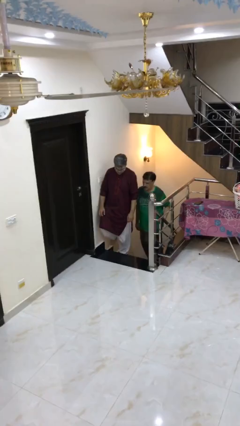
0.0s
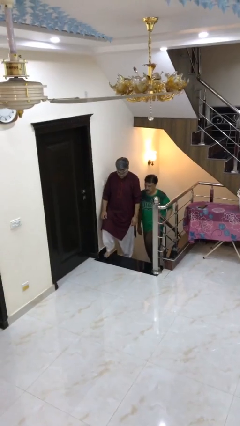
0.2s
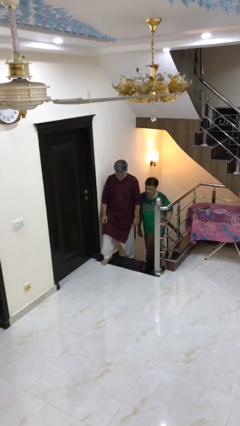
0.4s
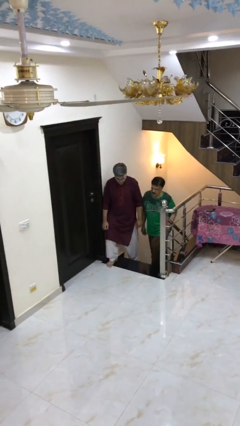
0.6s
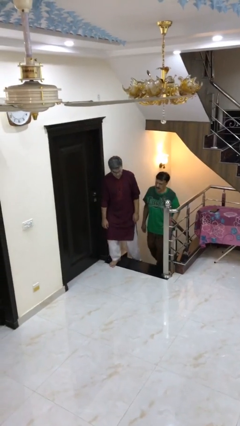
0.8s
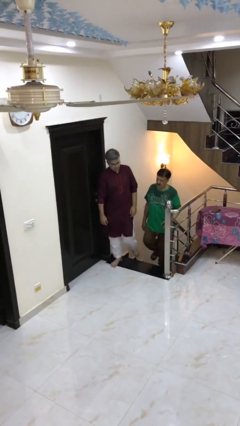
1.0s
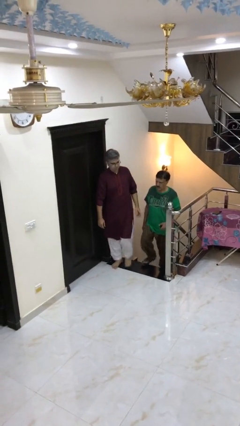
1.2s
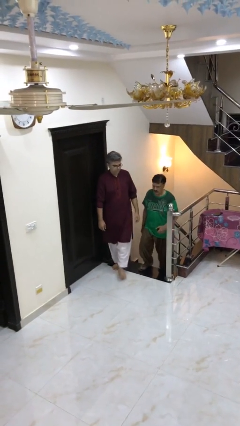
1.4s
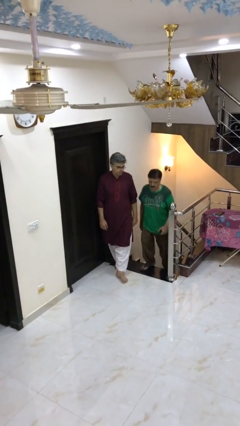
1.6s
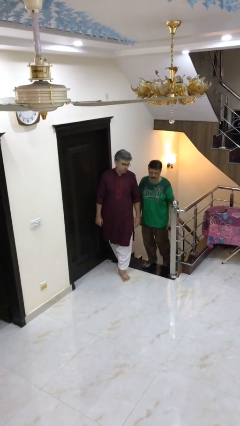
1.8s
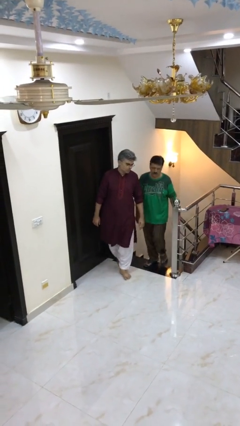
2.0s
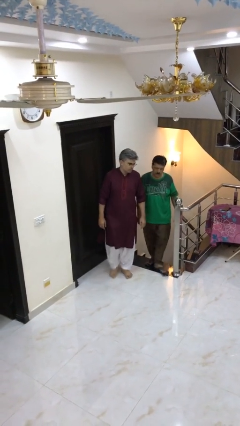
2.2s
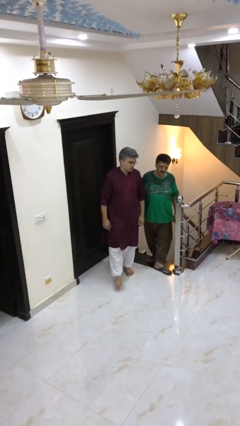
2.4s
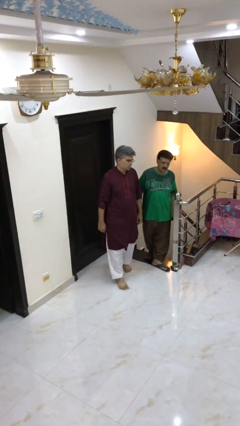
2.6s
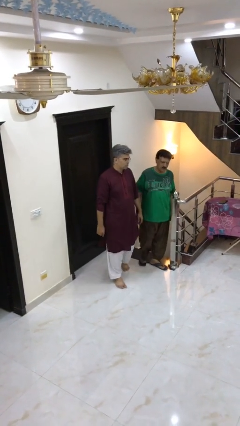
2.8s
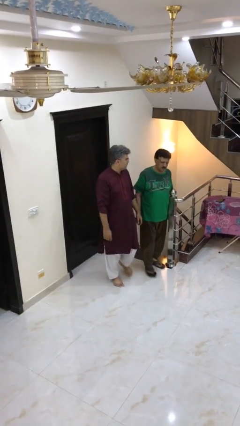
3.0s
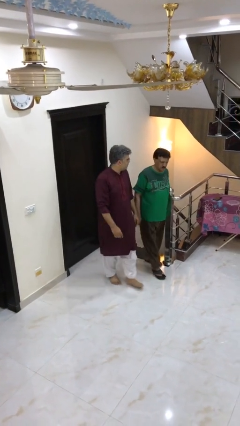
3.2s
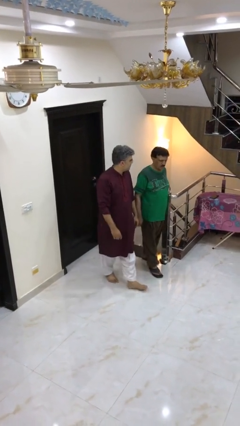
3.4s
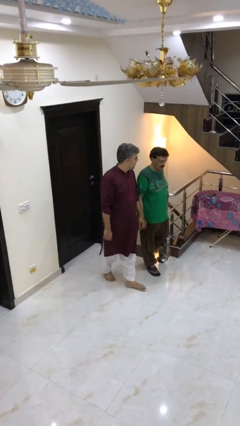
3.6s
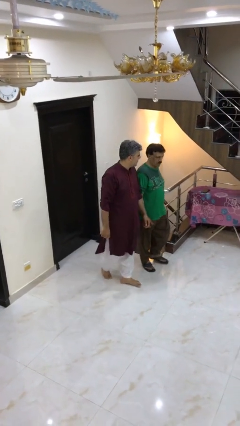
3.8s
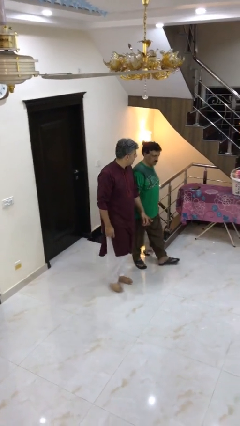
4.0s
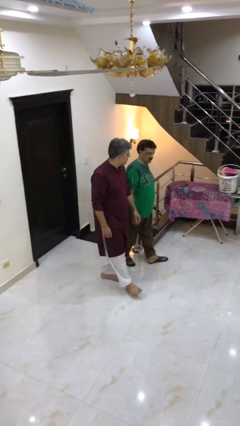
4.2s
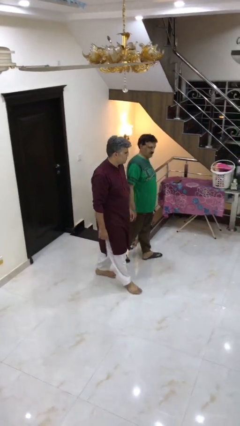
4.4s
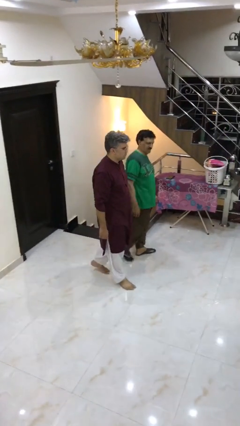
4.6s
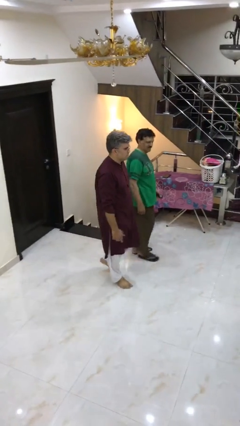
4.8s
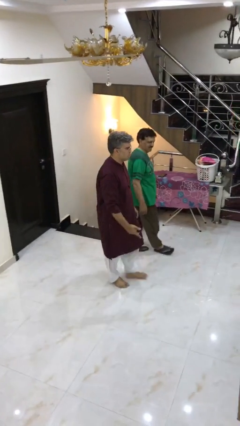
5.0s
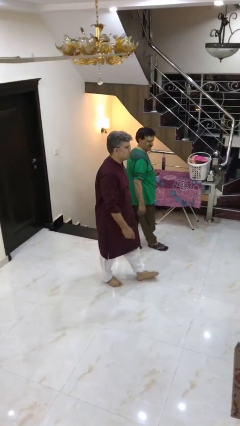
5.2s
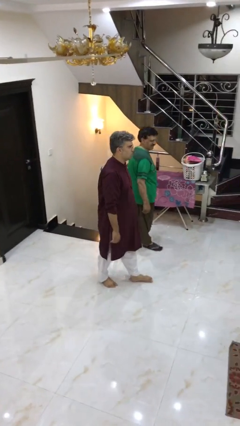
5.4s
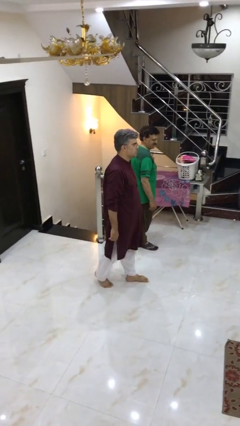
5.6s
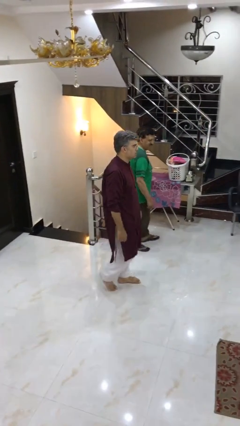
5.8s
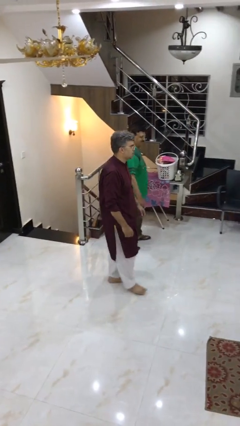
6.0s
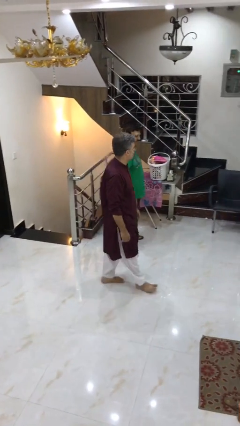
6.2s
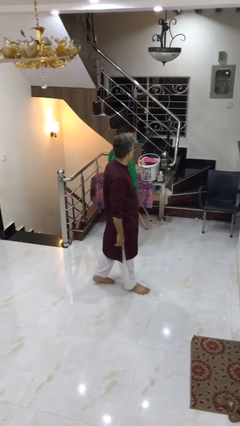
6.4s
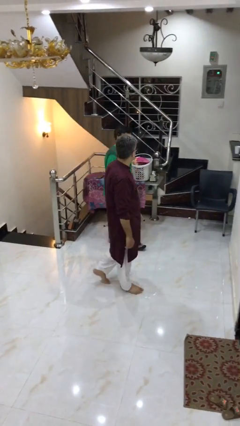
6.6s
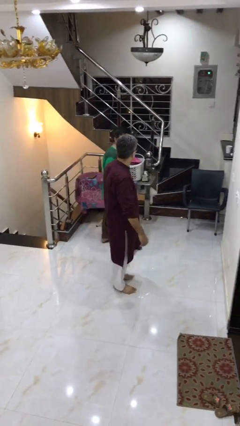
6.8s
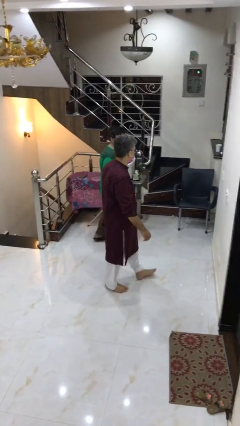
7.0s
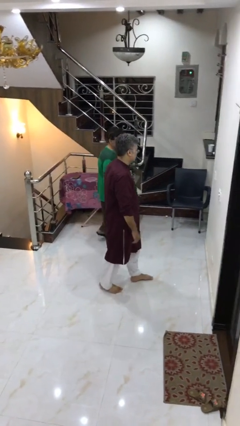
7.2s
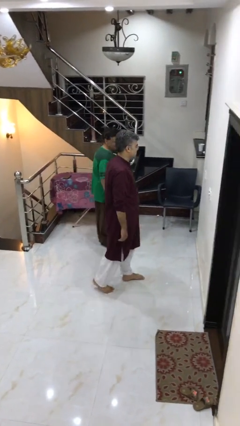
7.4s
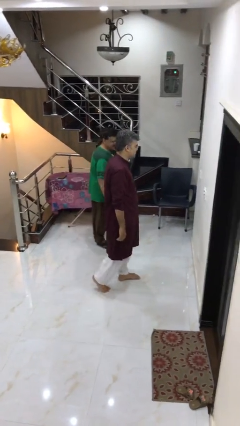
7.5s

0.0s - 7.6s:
person talks to person

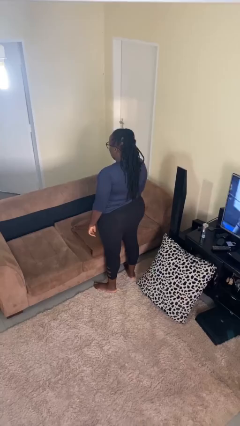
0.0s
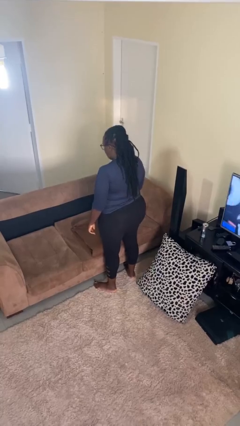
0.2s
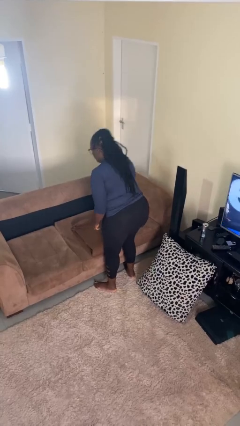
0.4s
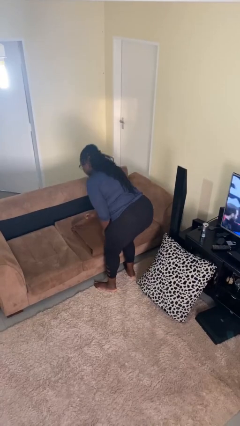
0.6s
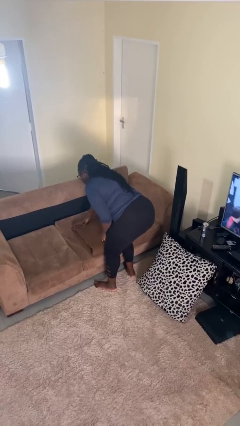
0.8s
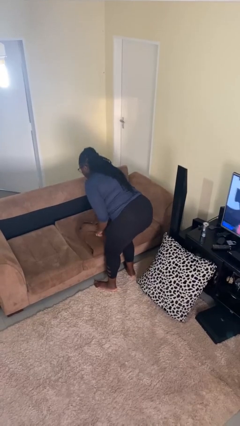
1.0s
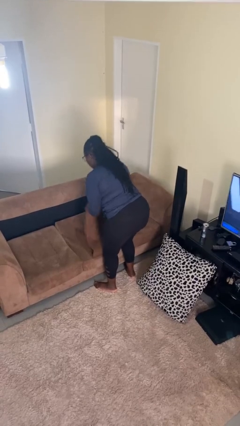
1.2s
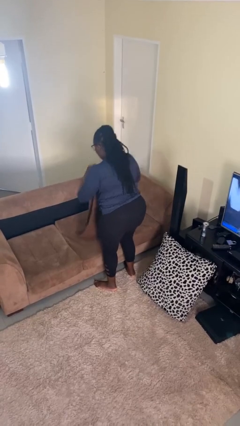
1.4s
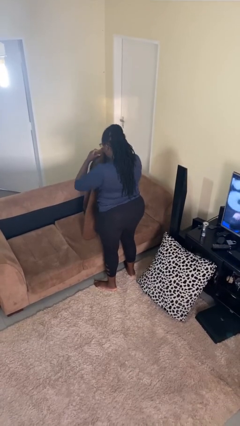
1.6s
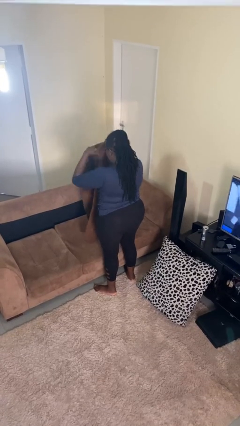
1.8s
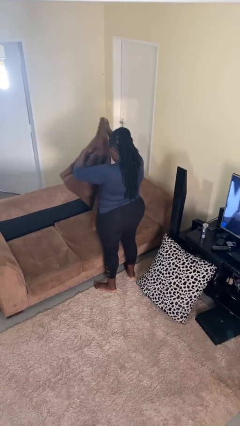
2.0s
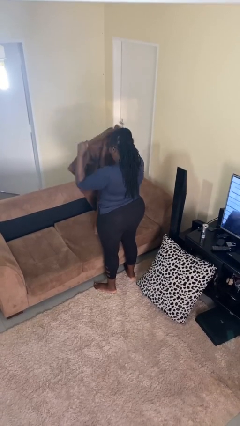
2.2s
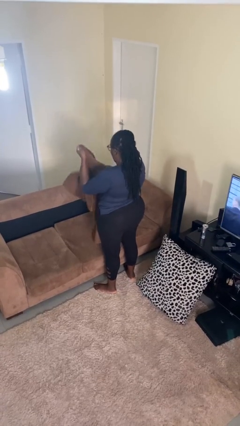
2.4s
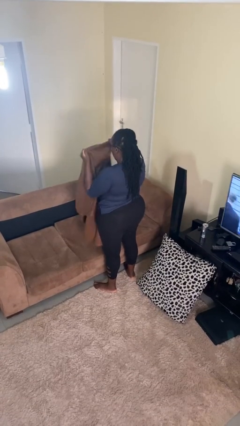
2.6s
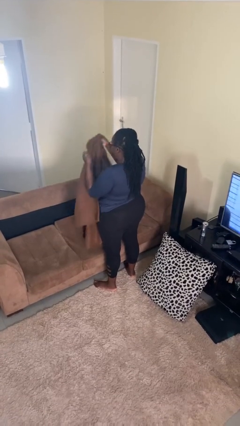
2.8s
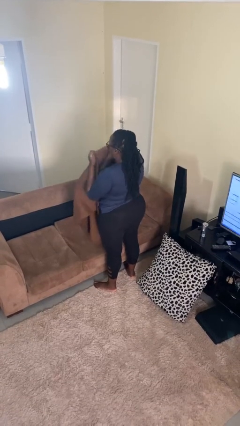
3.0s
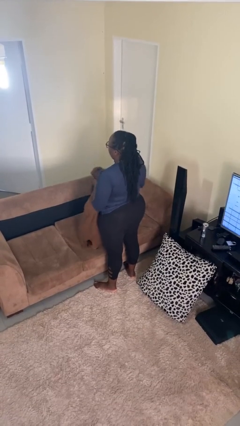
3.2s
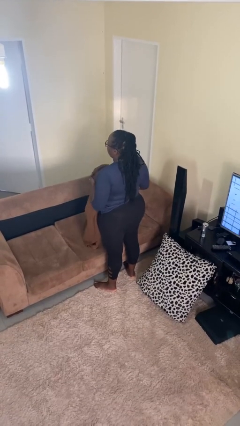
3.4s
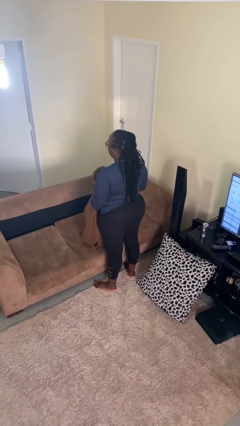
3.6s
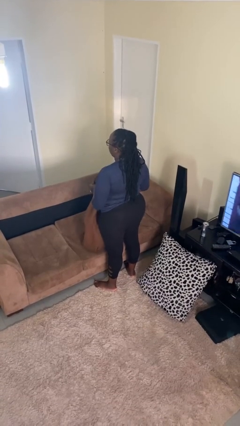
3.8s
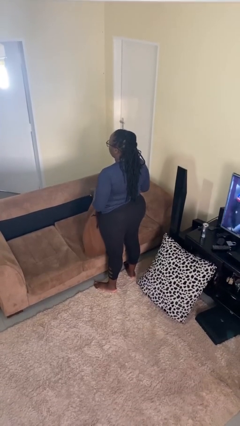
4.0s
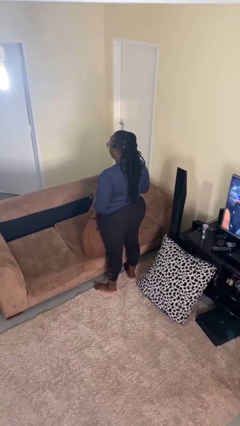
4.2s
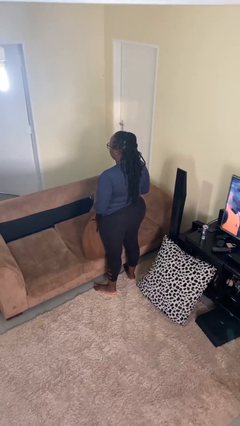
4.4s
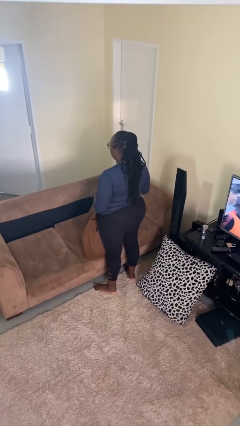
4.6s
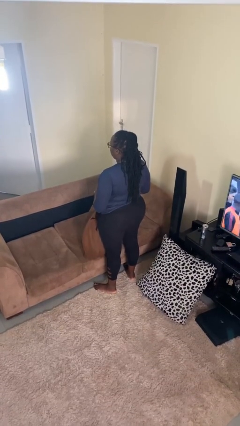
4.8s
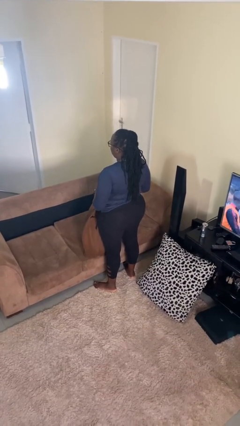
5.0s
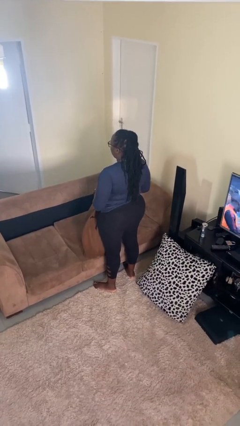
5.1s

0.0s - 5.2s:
person unfolds blanket

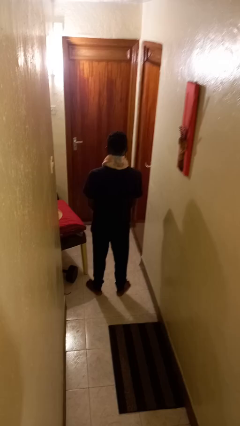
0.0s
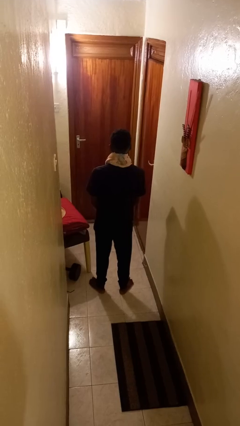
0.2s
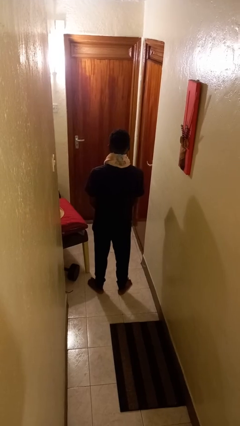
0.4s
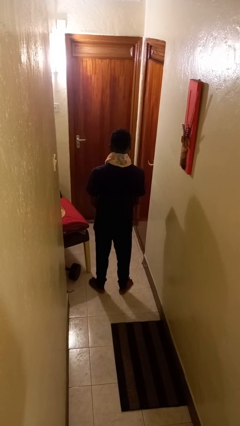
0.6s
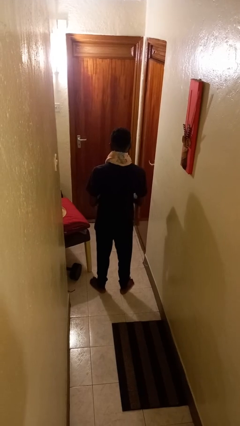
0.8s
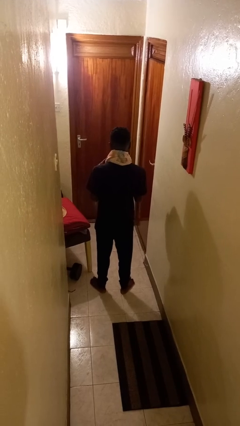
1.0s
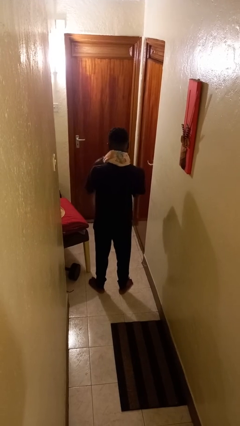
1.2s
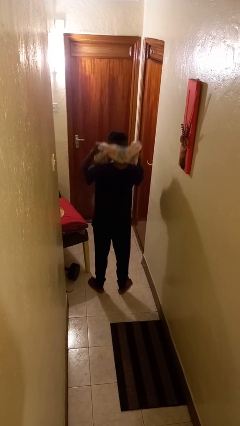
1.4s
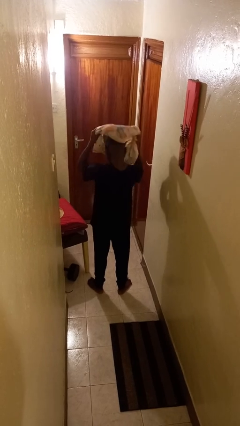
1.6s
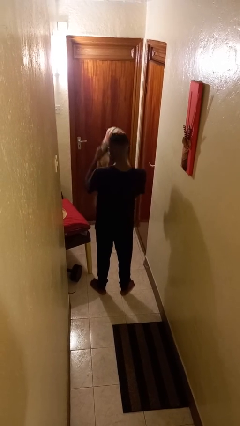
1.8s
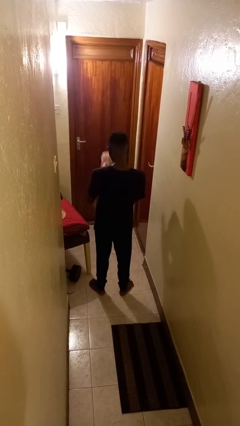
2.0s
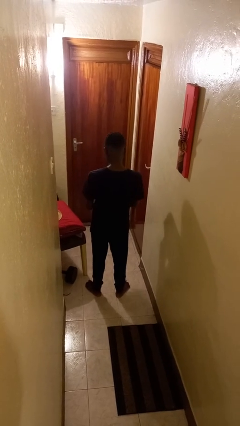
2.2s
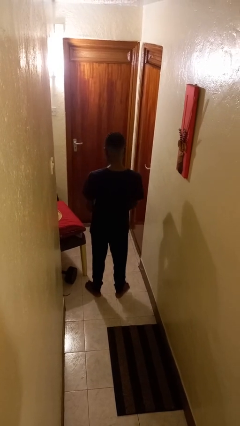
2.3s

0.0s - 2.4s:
person takes off scarf

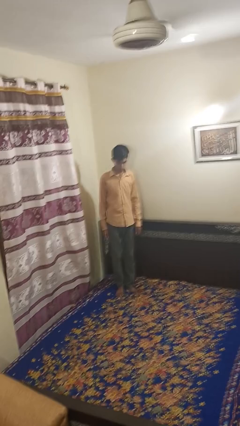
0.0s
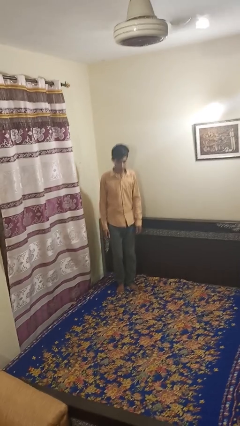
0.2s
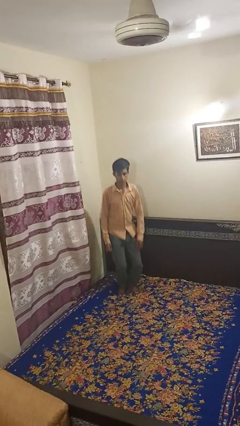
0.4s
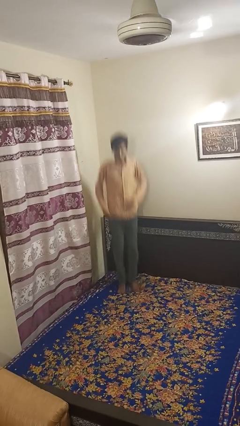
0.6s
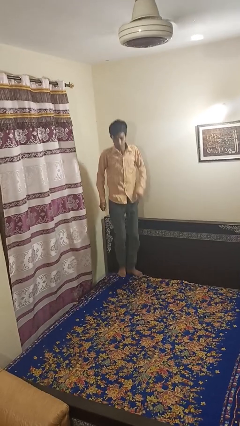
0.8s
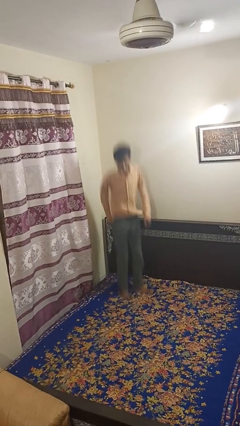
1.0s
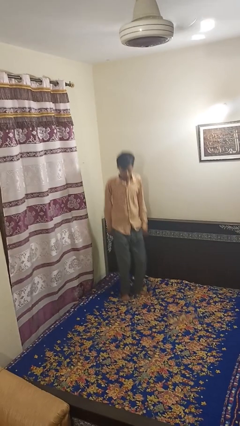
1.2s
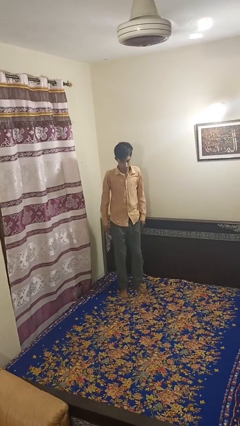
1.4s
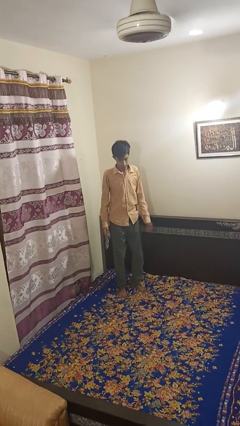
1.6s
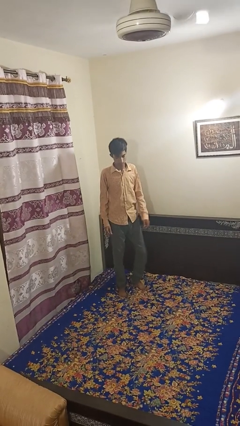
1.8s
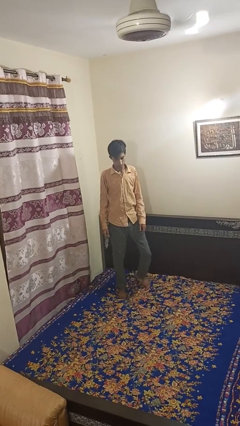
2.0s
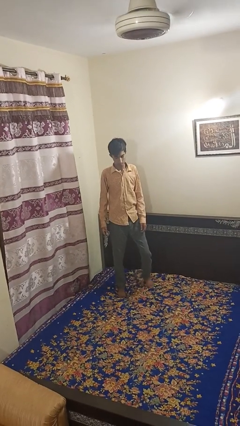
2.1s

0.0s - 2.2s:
person jumps on bed

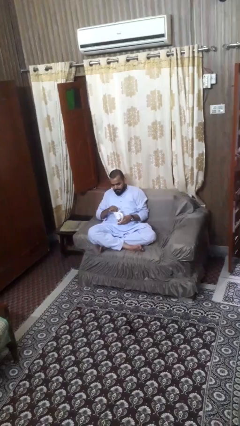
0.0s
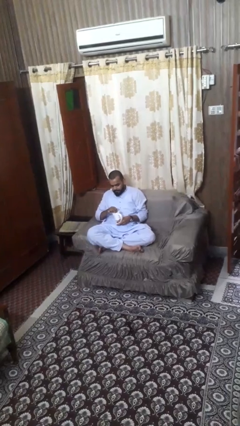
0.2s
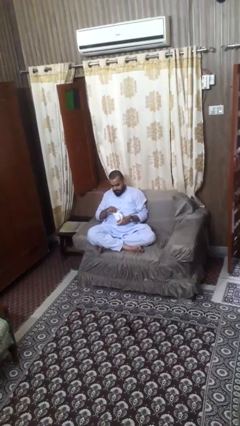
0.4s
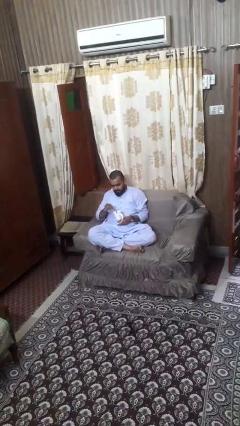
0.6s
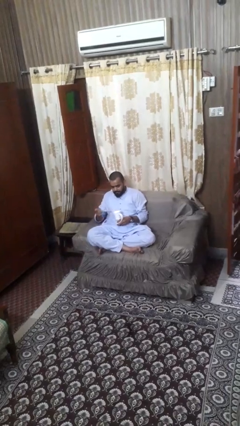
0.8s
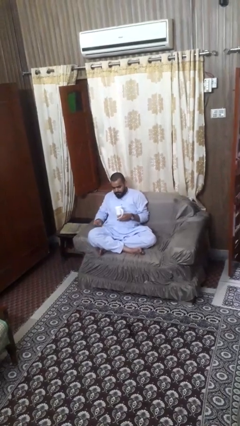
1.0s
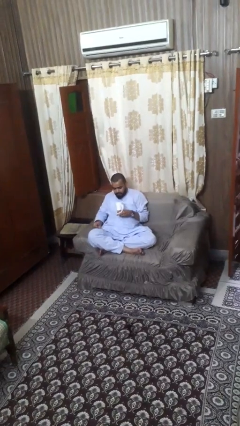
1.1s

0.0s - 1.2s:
person stirs mug
